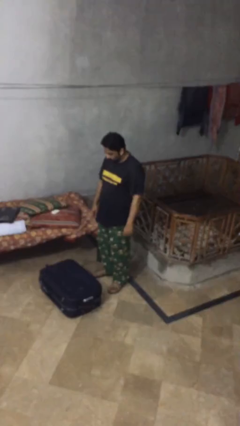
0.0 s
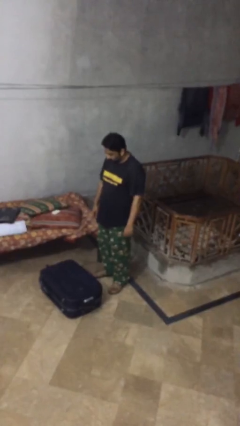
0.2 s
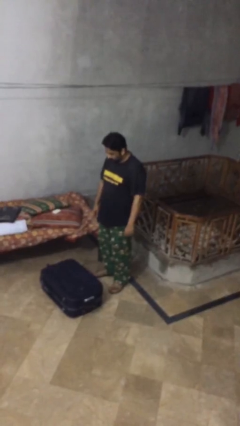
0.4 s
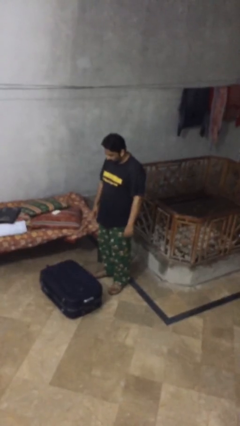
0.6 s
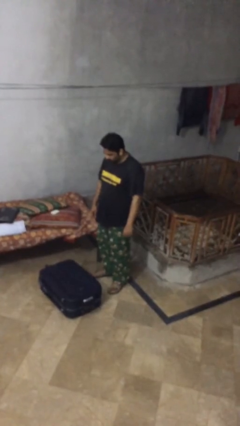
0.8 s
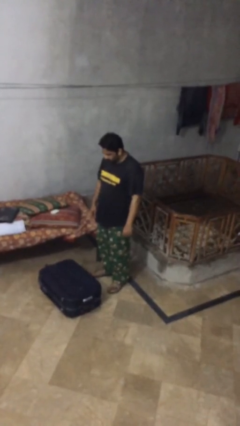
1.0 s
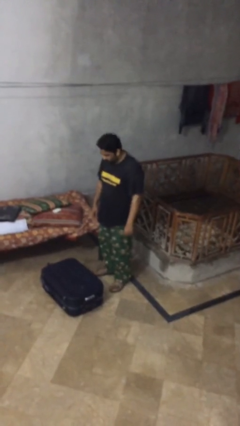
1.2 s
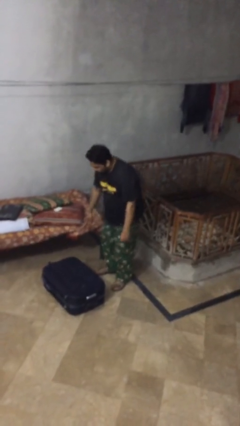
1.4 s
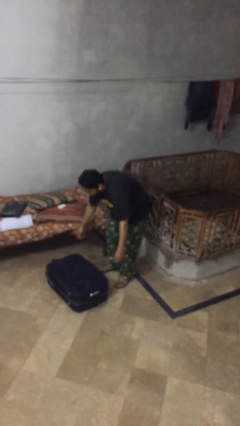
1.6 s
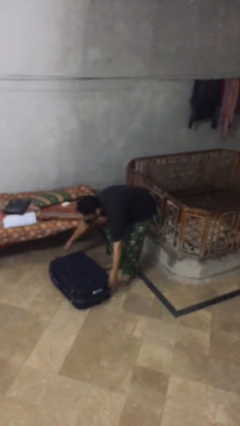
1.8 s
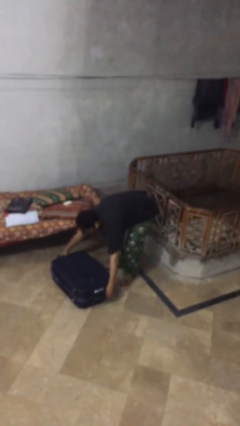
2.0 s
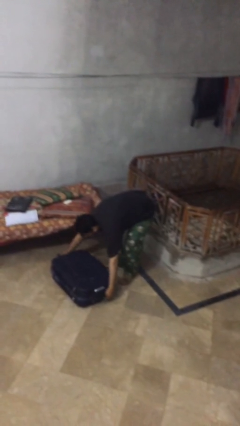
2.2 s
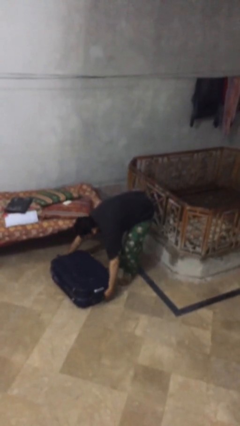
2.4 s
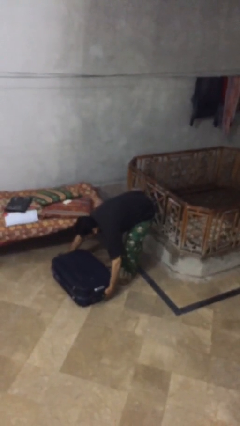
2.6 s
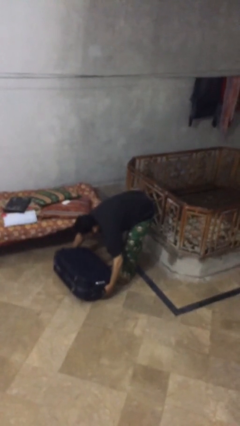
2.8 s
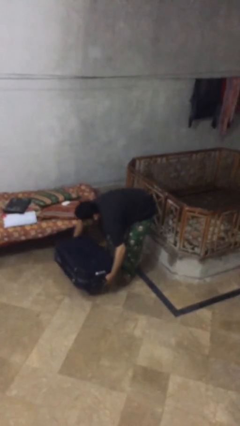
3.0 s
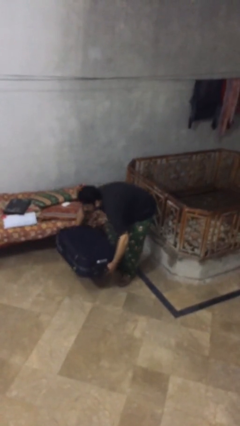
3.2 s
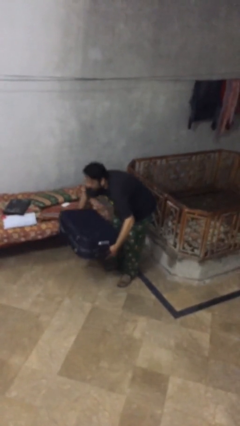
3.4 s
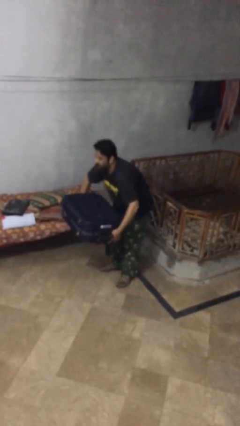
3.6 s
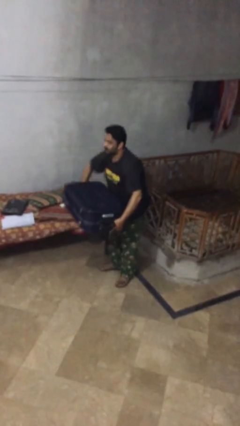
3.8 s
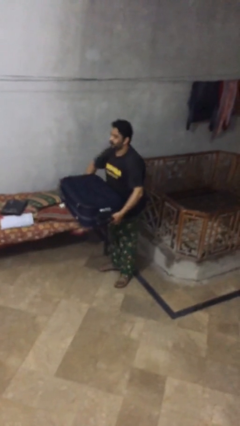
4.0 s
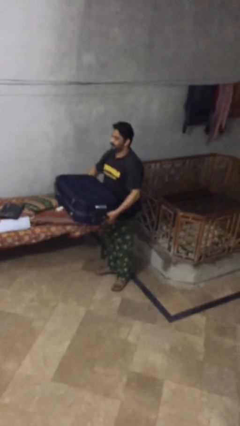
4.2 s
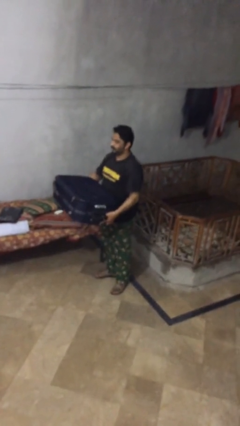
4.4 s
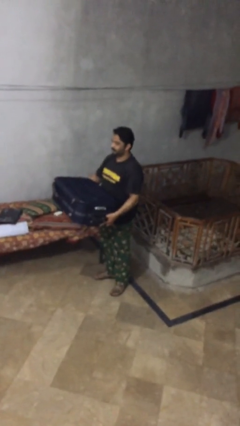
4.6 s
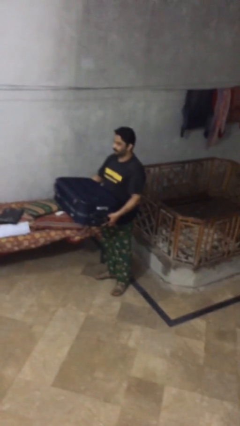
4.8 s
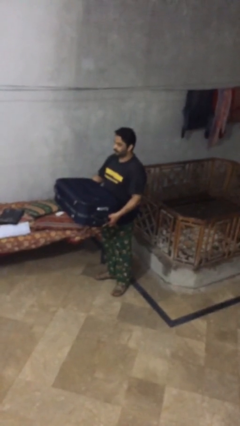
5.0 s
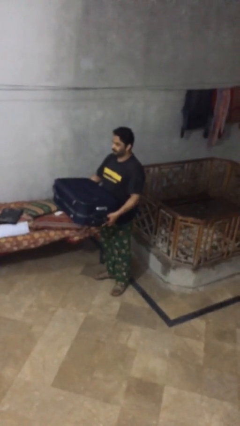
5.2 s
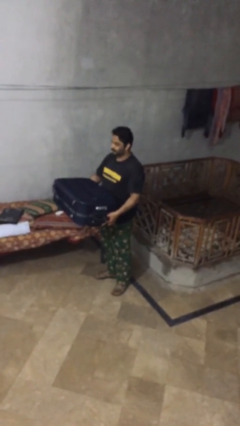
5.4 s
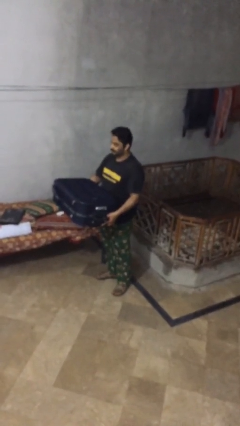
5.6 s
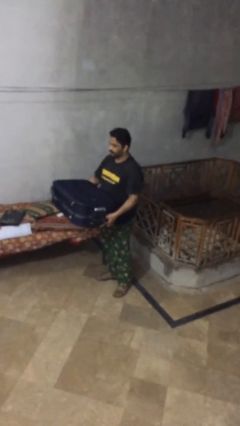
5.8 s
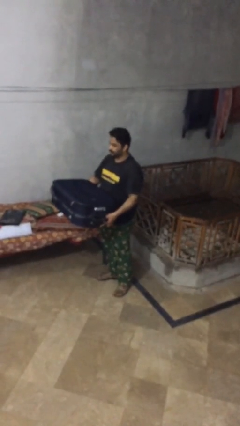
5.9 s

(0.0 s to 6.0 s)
person carries heavy object

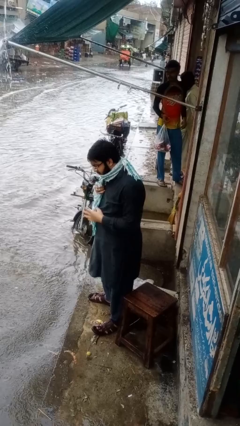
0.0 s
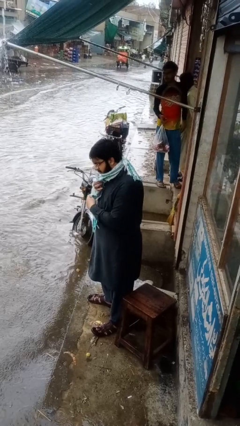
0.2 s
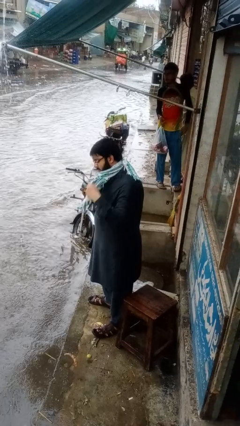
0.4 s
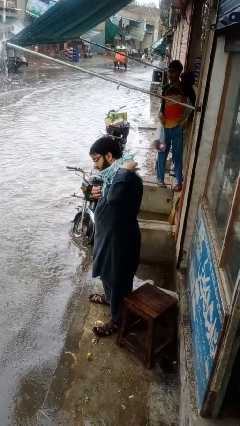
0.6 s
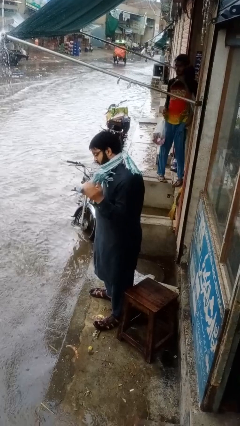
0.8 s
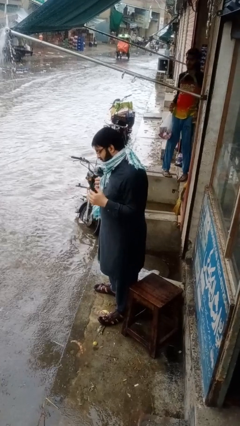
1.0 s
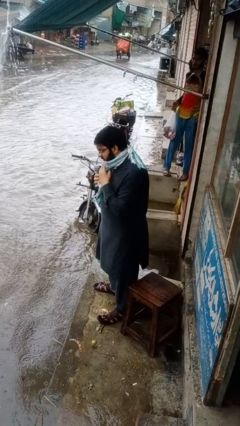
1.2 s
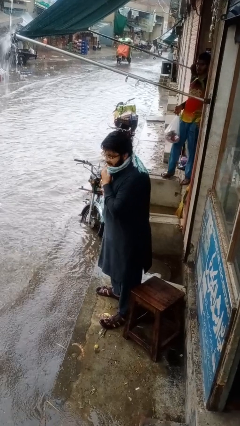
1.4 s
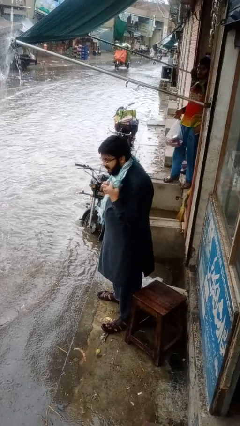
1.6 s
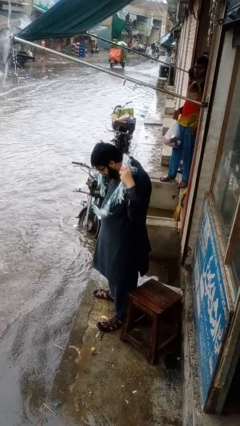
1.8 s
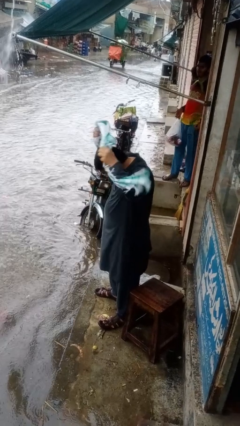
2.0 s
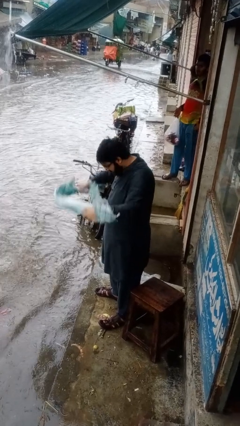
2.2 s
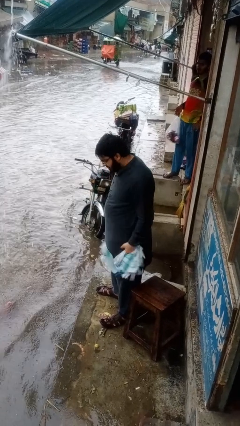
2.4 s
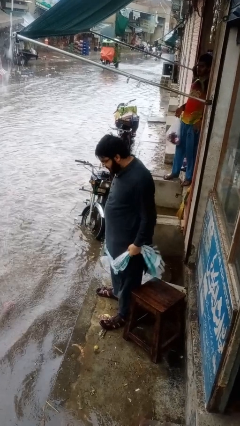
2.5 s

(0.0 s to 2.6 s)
person takes off scarf

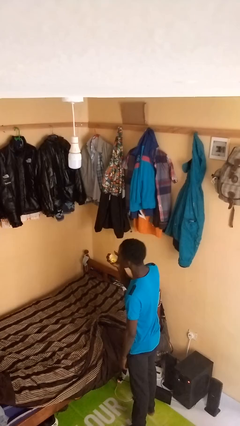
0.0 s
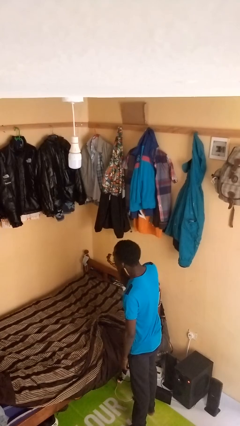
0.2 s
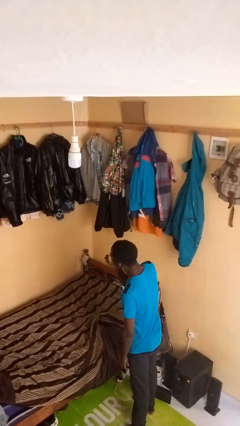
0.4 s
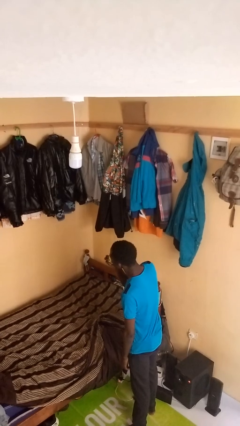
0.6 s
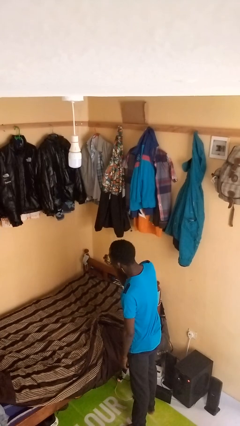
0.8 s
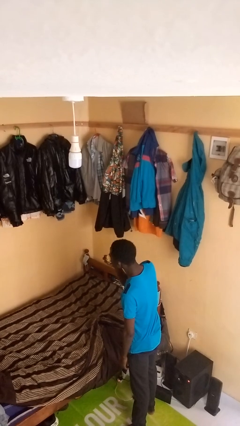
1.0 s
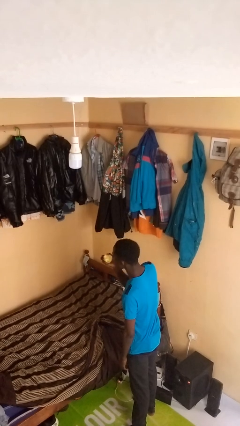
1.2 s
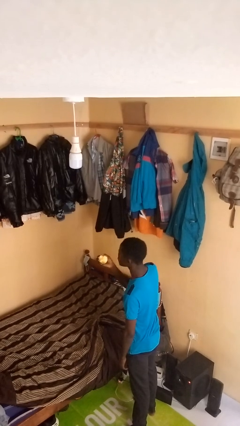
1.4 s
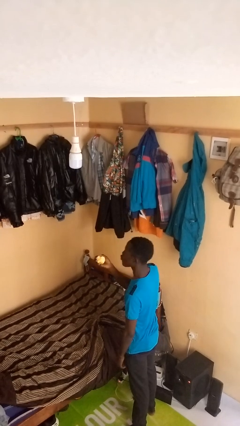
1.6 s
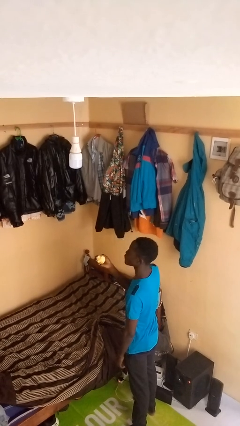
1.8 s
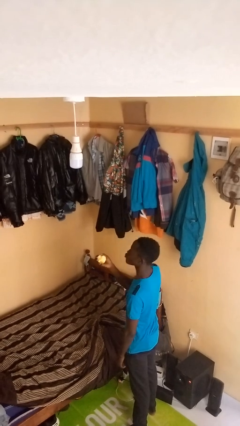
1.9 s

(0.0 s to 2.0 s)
person eats apple

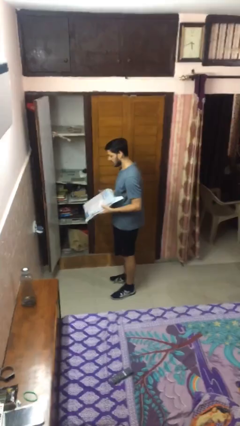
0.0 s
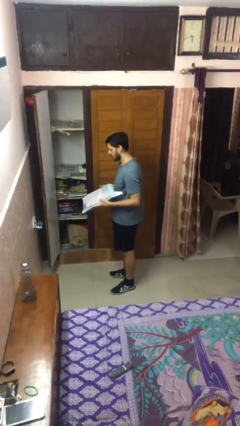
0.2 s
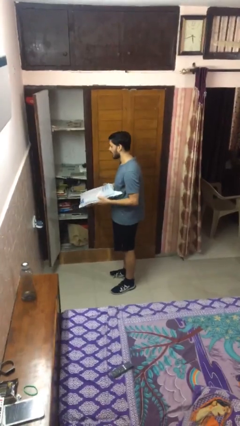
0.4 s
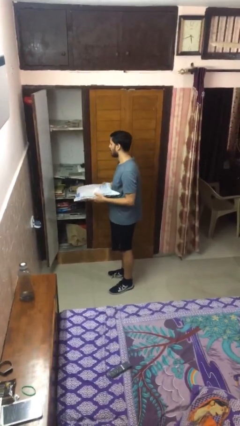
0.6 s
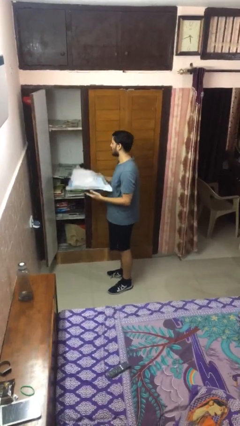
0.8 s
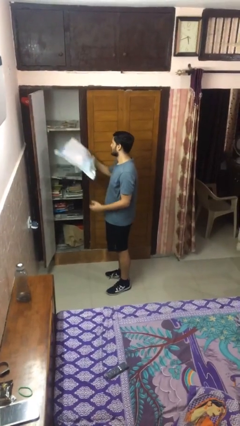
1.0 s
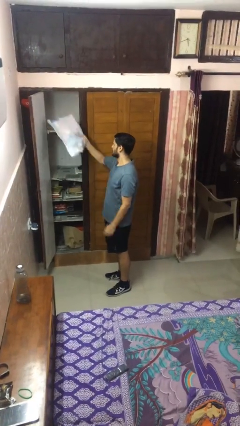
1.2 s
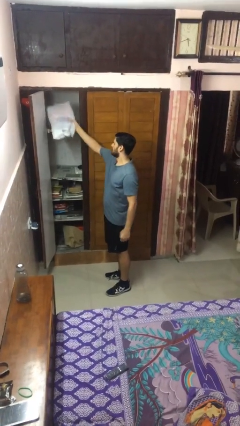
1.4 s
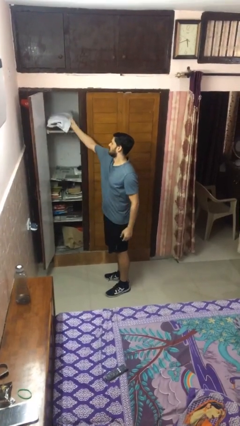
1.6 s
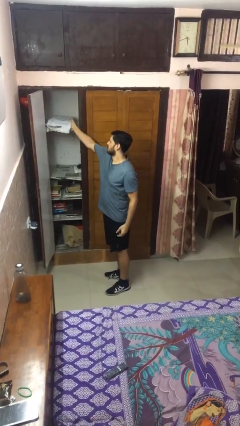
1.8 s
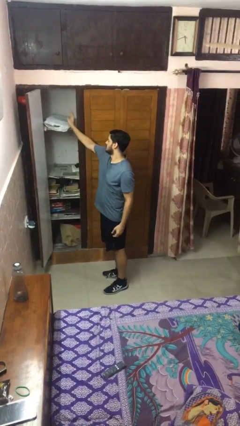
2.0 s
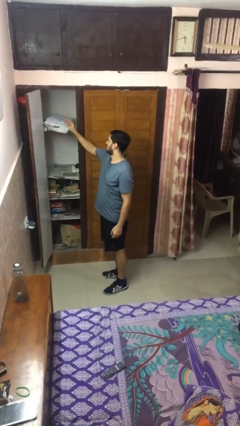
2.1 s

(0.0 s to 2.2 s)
person puts down object on shelf

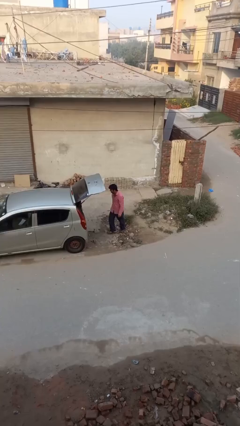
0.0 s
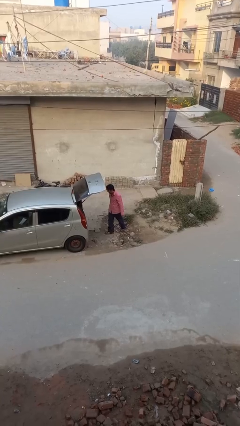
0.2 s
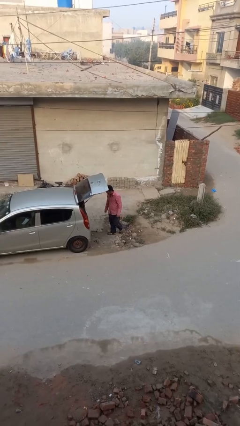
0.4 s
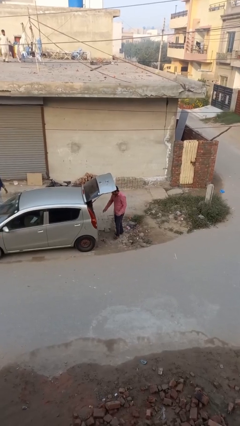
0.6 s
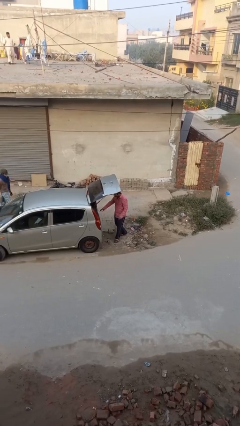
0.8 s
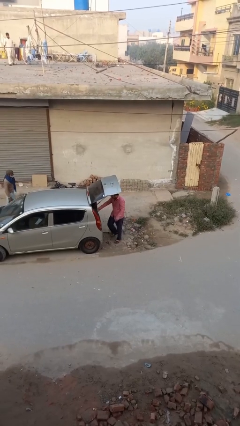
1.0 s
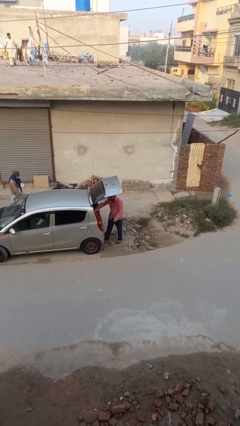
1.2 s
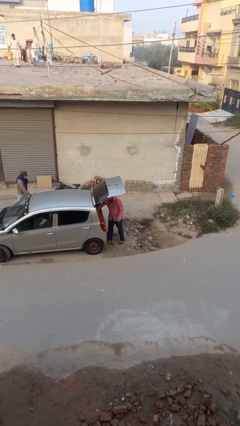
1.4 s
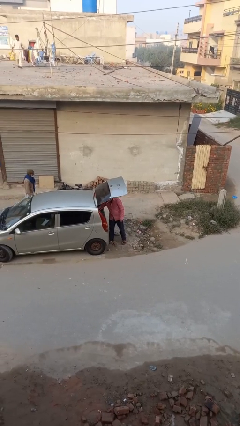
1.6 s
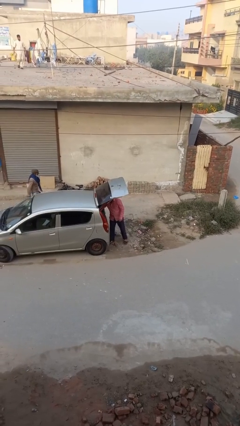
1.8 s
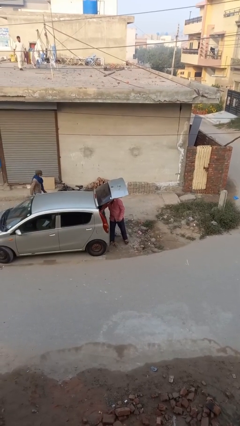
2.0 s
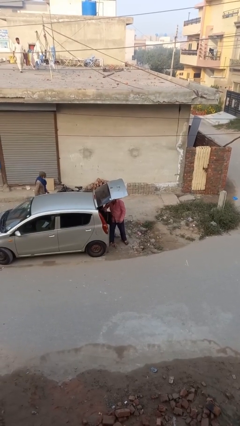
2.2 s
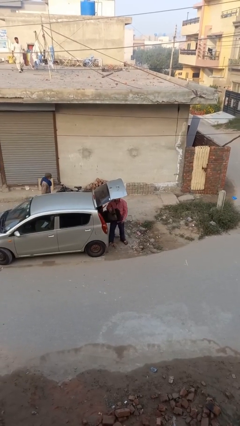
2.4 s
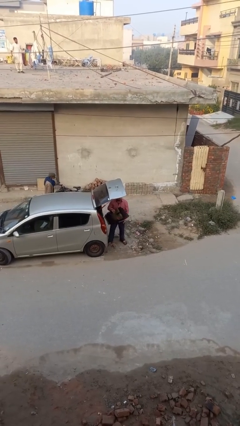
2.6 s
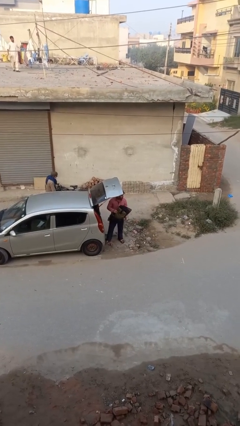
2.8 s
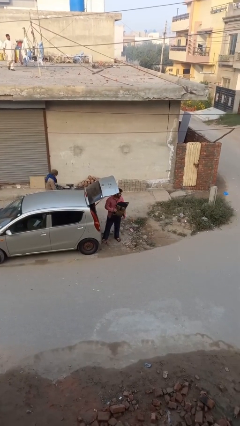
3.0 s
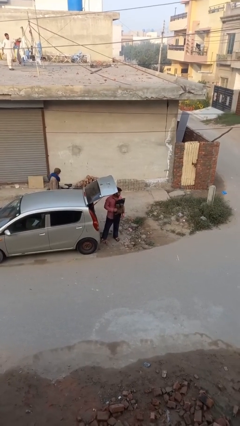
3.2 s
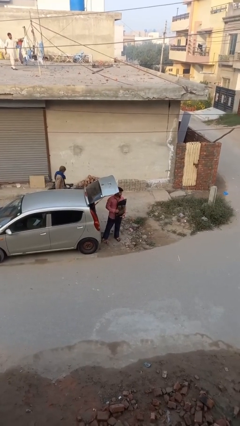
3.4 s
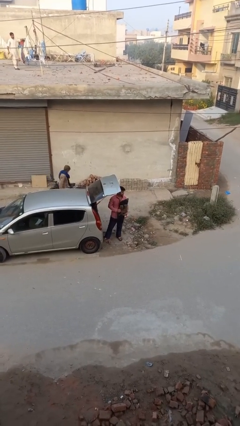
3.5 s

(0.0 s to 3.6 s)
person unloads car

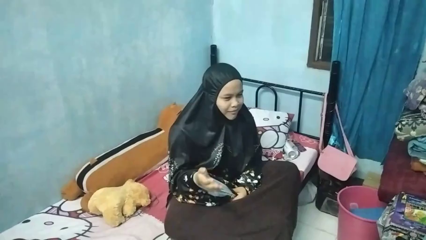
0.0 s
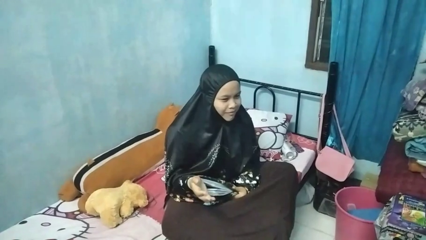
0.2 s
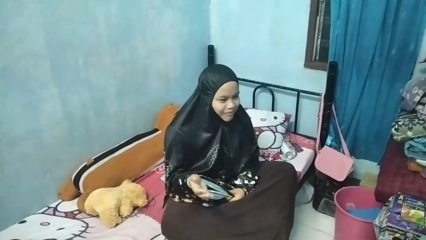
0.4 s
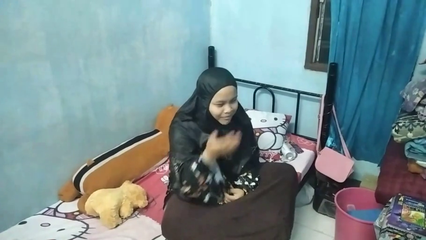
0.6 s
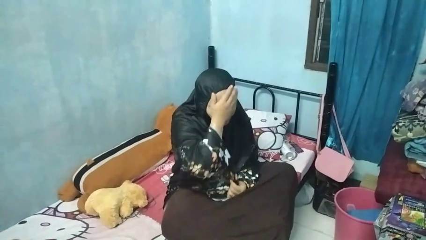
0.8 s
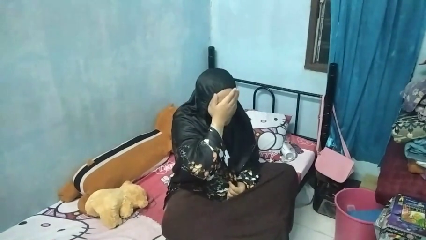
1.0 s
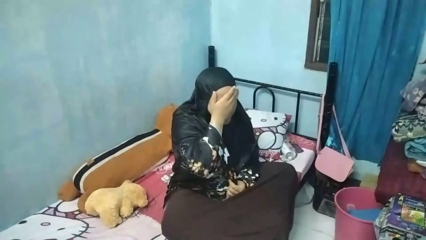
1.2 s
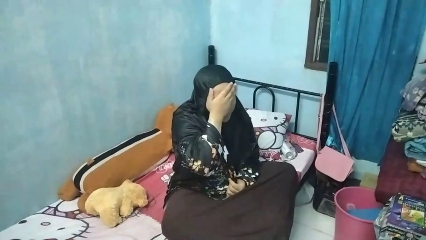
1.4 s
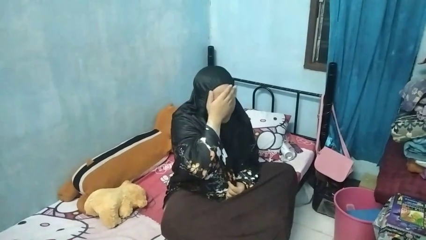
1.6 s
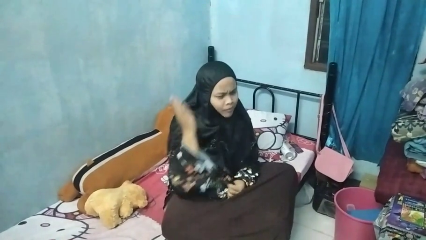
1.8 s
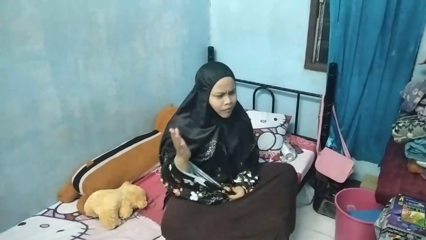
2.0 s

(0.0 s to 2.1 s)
person covers face with hands
